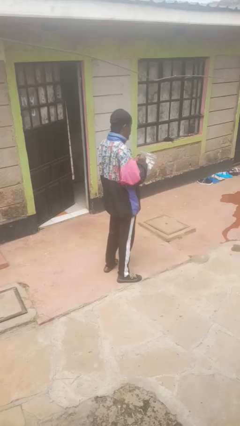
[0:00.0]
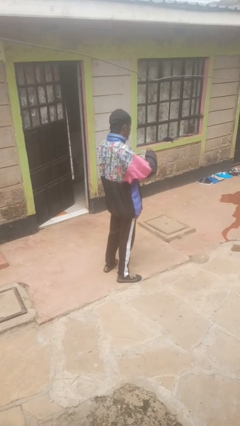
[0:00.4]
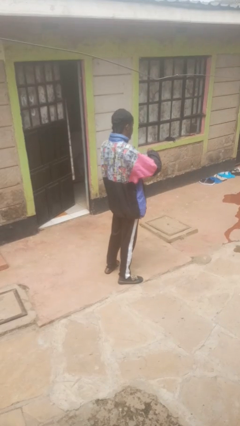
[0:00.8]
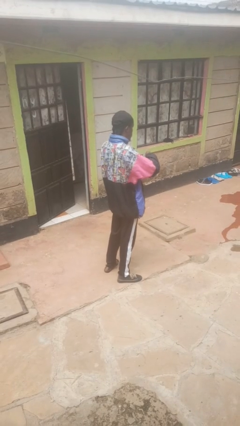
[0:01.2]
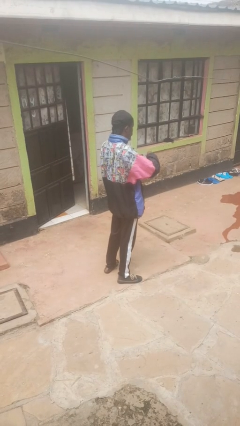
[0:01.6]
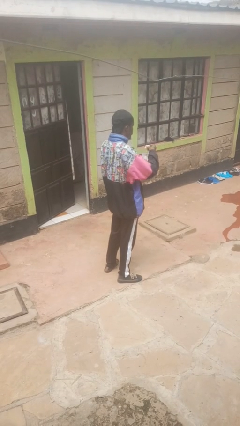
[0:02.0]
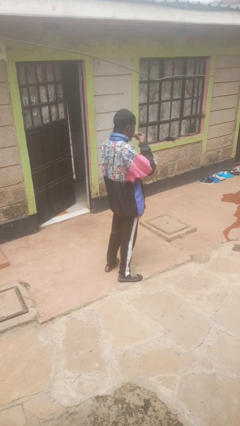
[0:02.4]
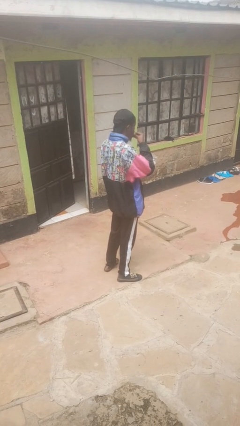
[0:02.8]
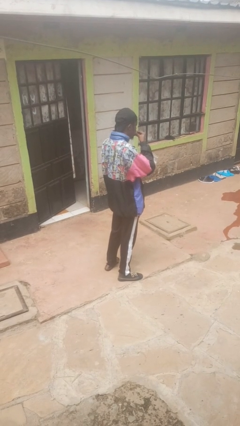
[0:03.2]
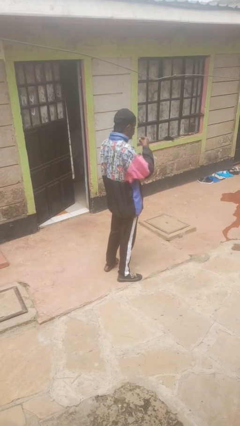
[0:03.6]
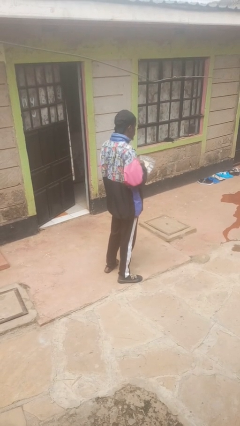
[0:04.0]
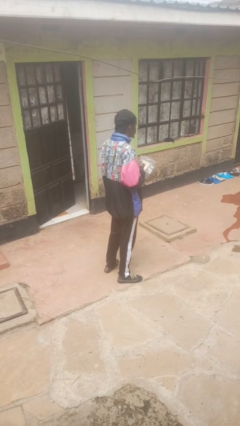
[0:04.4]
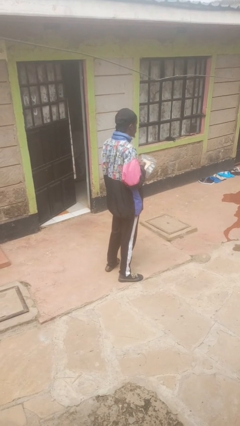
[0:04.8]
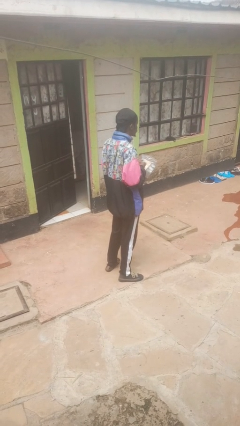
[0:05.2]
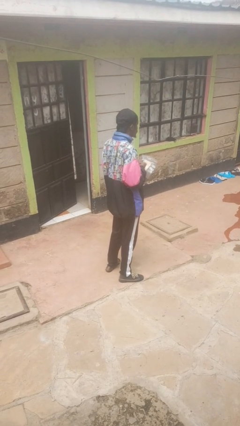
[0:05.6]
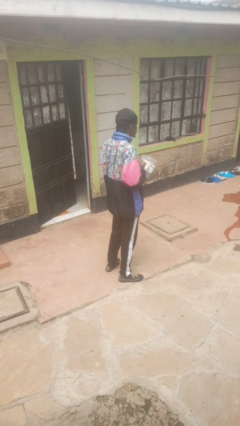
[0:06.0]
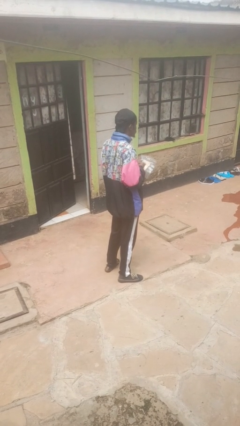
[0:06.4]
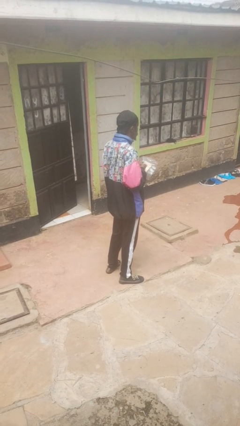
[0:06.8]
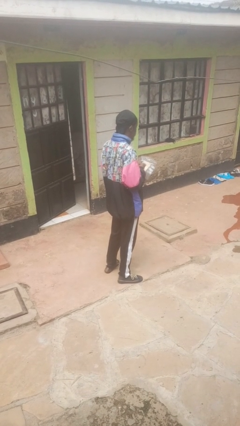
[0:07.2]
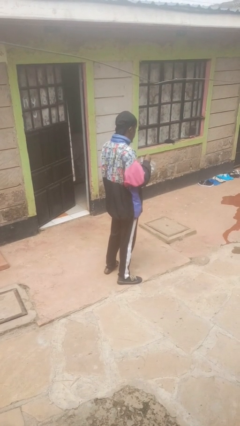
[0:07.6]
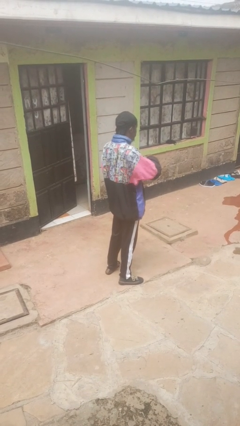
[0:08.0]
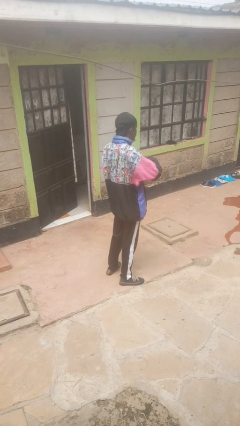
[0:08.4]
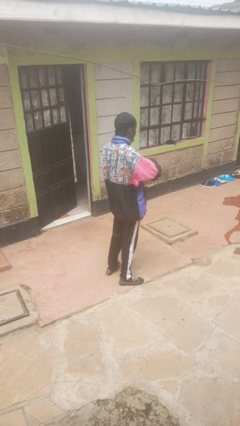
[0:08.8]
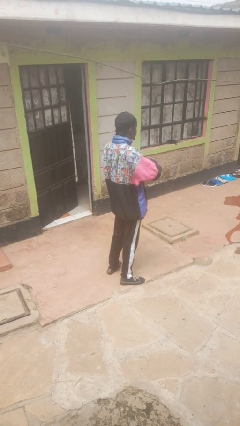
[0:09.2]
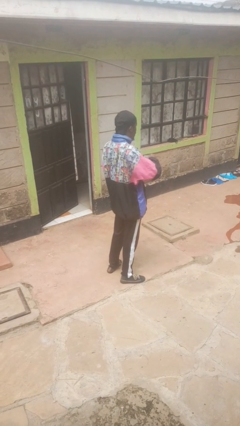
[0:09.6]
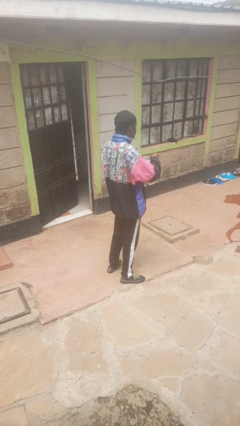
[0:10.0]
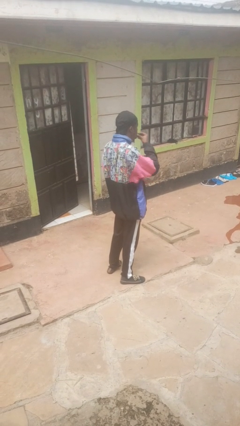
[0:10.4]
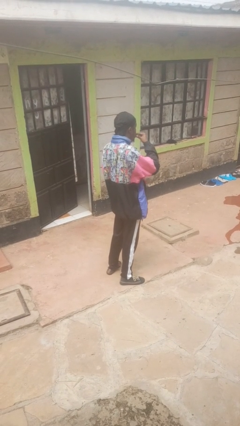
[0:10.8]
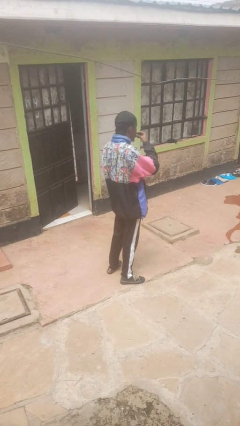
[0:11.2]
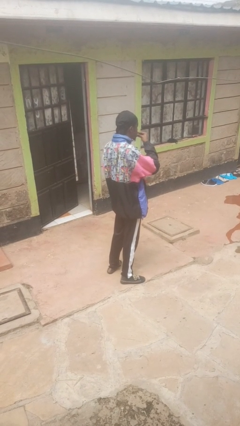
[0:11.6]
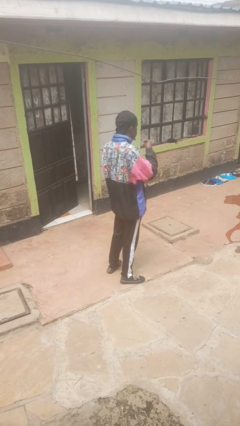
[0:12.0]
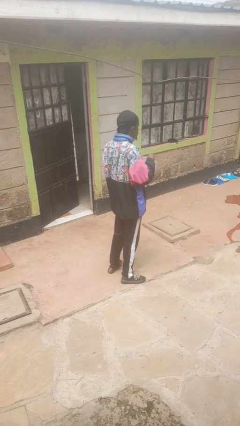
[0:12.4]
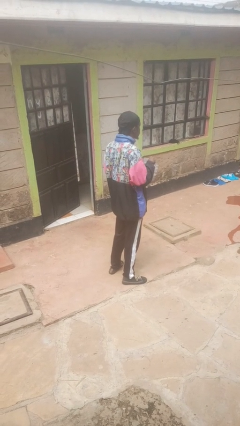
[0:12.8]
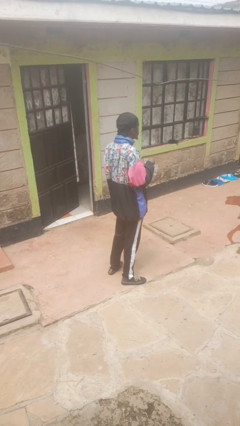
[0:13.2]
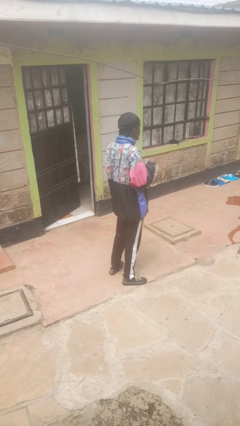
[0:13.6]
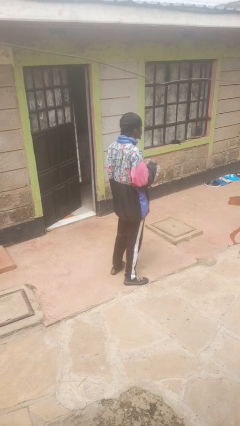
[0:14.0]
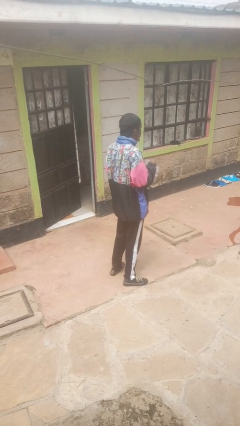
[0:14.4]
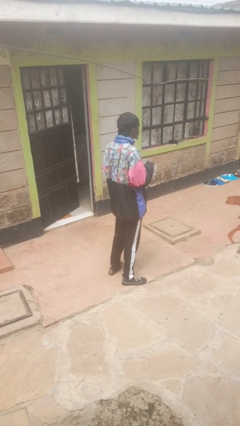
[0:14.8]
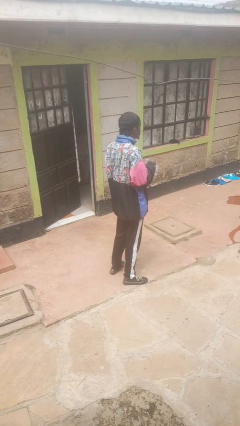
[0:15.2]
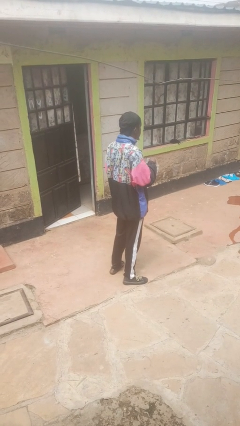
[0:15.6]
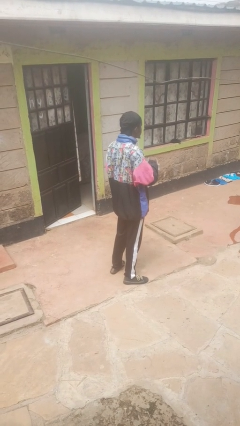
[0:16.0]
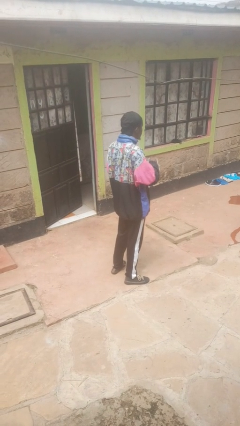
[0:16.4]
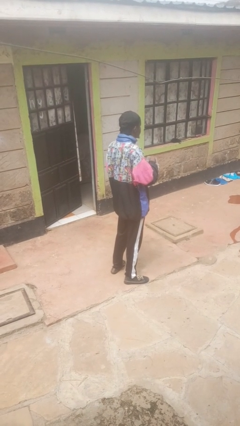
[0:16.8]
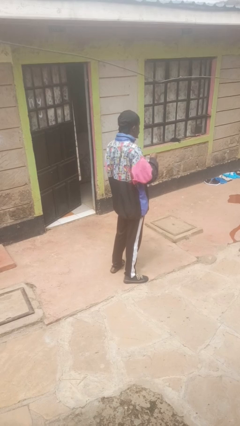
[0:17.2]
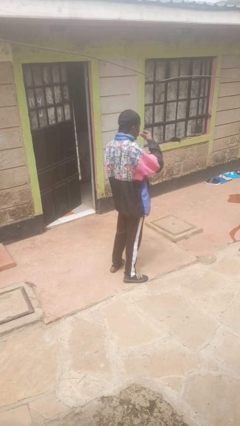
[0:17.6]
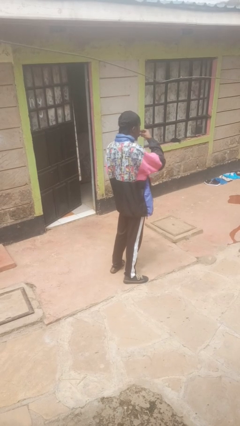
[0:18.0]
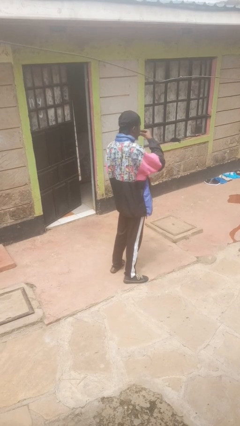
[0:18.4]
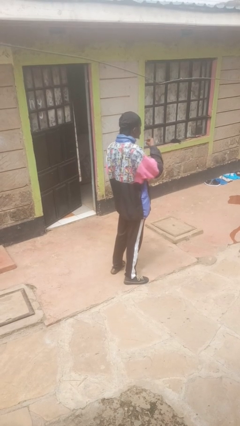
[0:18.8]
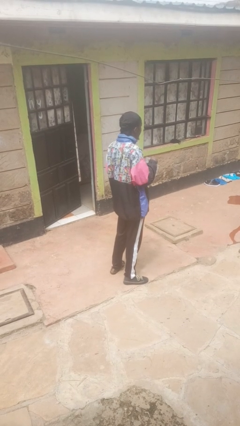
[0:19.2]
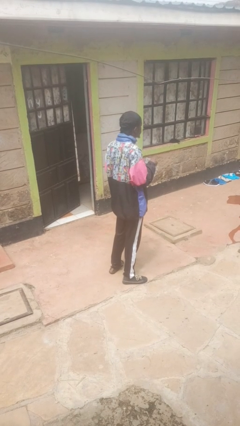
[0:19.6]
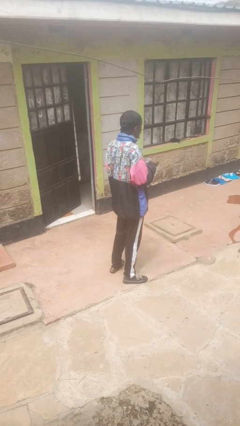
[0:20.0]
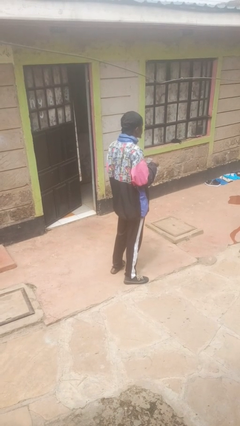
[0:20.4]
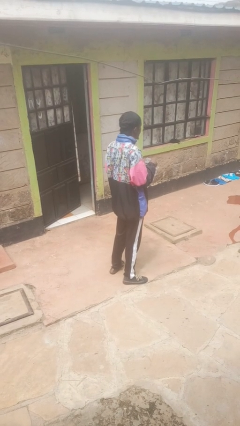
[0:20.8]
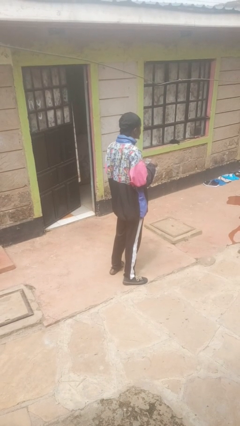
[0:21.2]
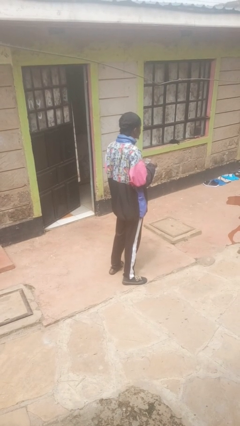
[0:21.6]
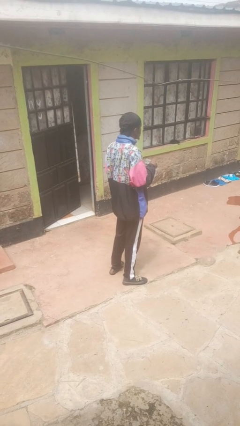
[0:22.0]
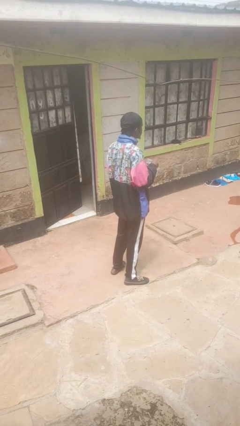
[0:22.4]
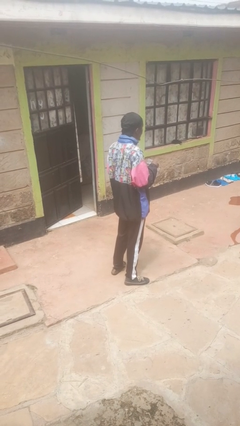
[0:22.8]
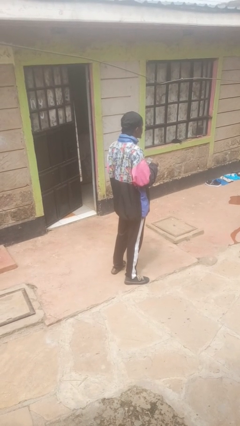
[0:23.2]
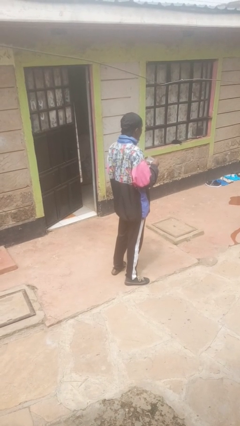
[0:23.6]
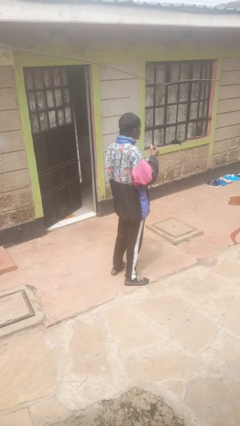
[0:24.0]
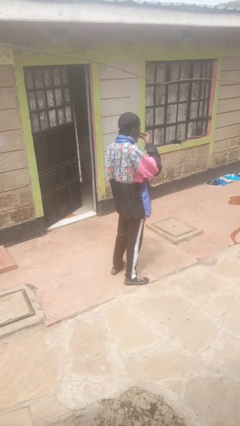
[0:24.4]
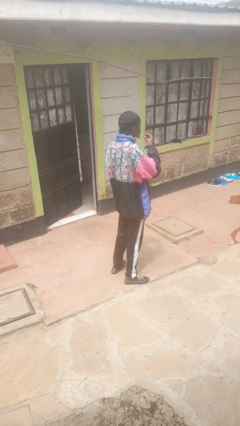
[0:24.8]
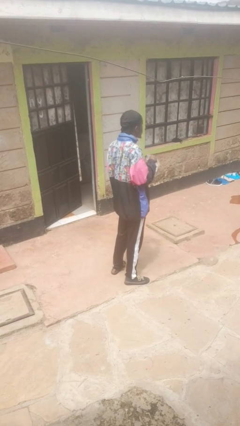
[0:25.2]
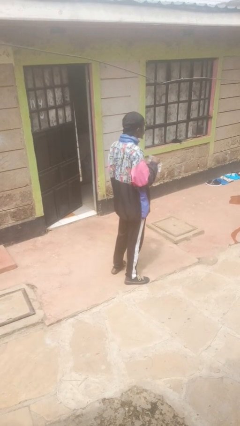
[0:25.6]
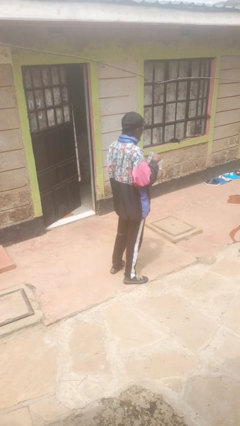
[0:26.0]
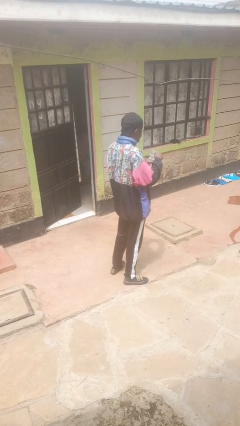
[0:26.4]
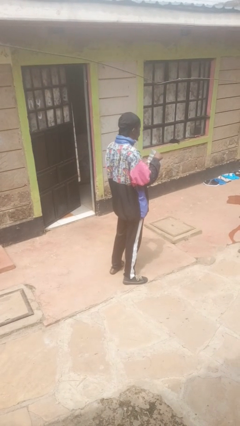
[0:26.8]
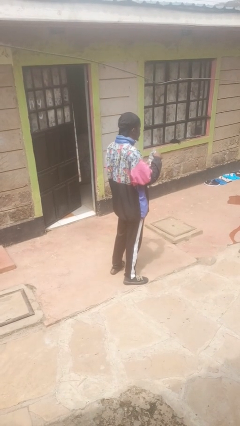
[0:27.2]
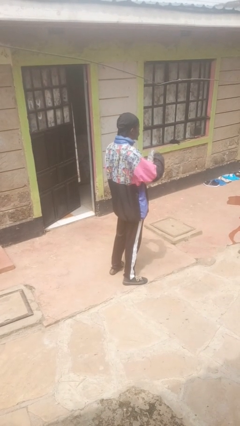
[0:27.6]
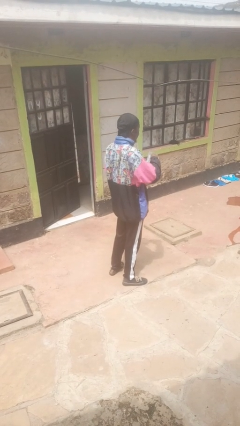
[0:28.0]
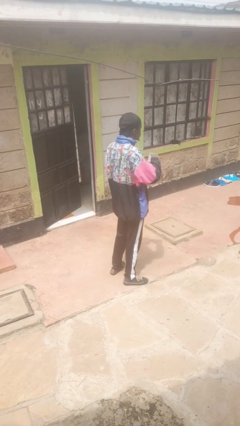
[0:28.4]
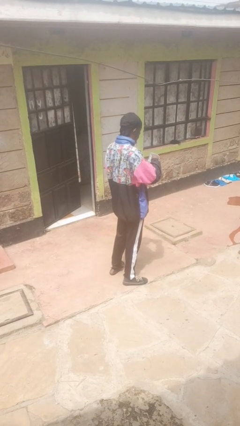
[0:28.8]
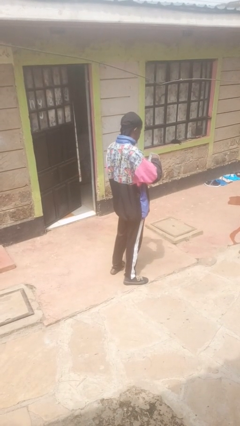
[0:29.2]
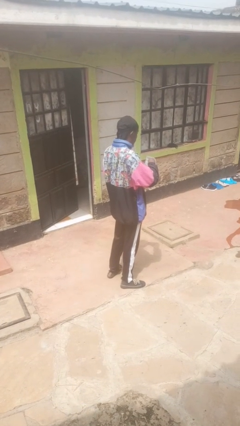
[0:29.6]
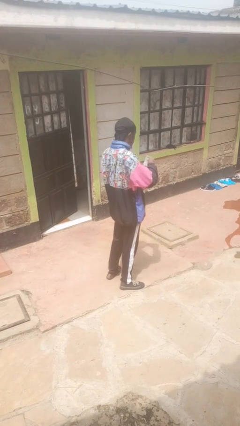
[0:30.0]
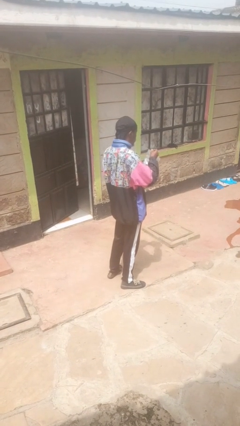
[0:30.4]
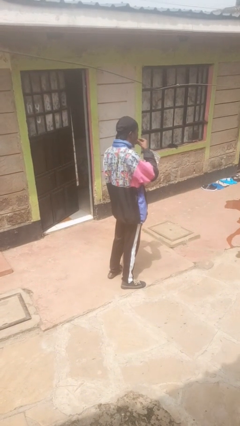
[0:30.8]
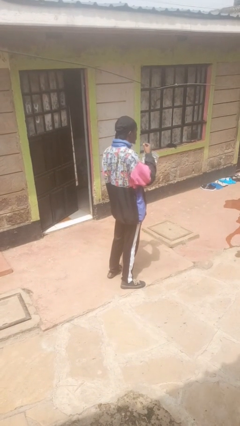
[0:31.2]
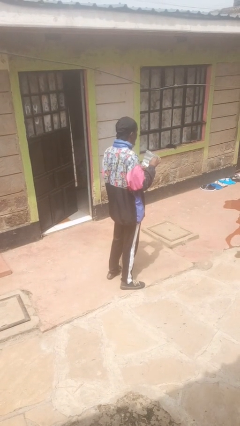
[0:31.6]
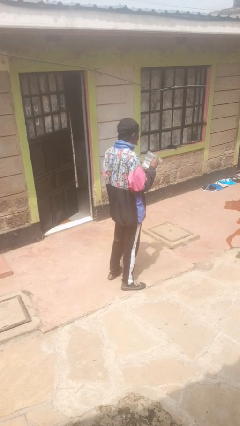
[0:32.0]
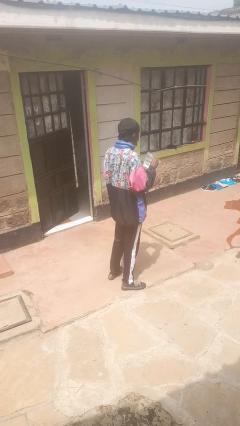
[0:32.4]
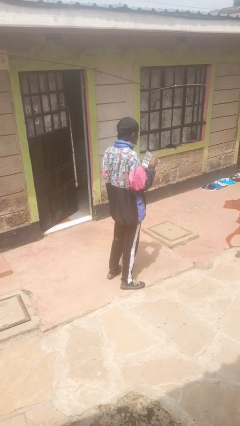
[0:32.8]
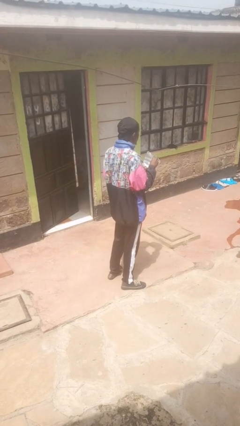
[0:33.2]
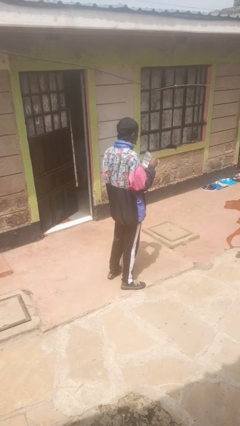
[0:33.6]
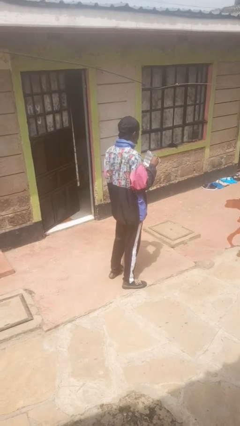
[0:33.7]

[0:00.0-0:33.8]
person eats snack from bag

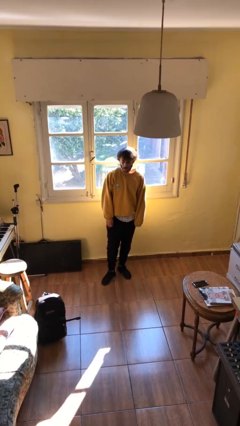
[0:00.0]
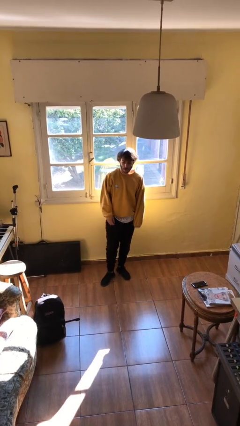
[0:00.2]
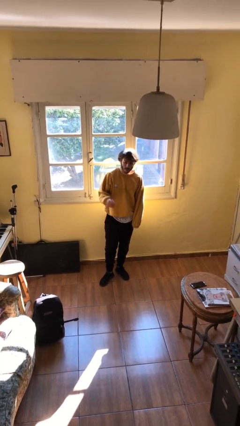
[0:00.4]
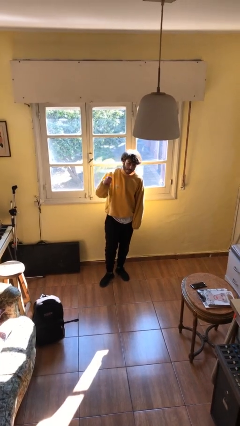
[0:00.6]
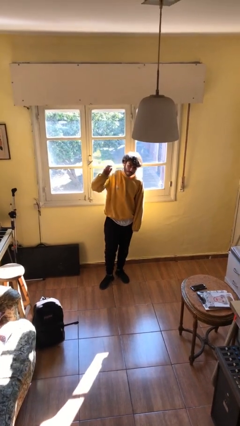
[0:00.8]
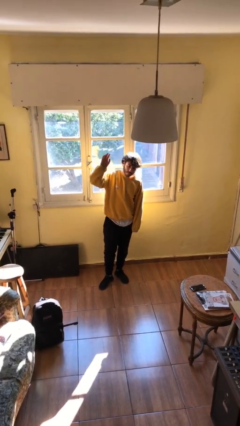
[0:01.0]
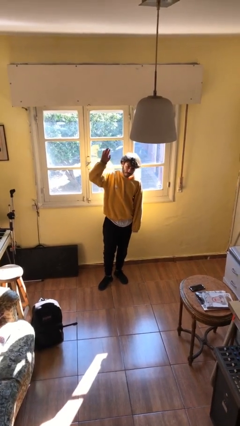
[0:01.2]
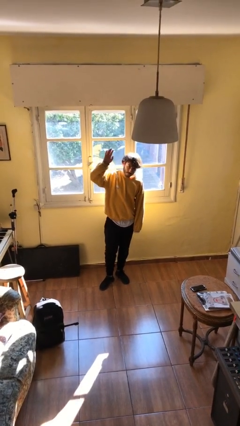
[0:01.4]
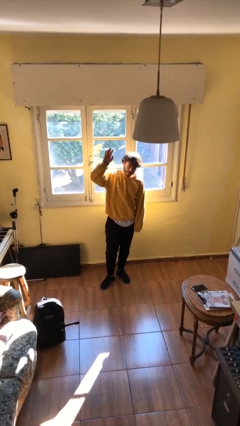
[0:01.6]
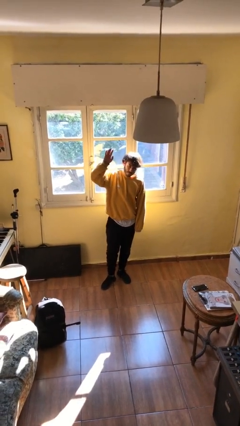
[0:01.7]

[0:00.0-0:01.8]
person gestures raise hand
